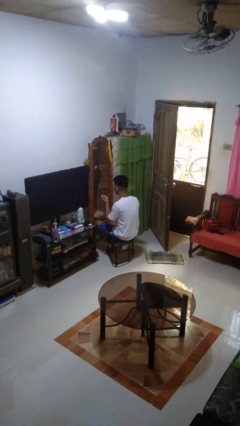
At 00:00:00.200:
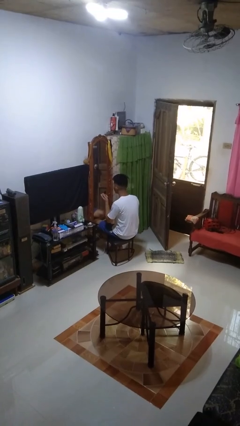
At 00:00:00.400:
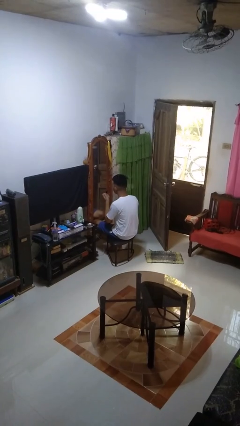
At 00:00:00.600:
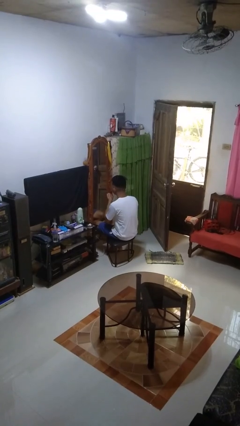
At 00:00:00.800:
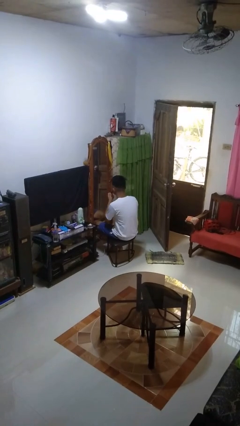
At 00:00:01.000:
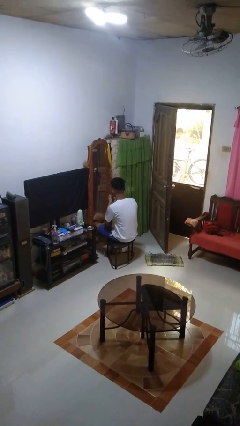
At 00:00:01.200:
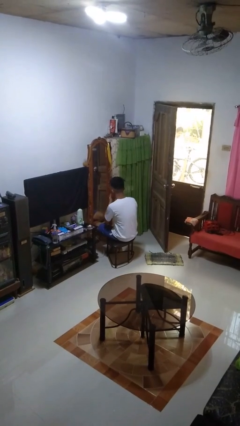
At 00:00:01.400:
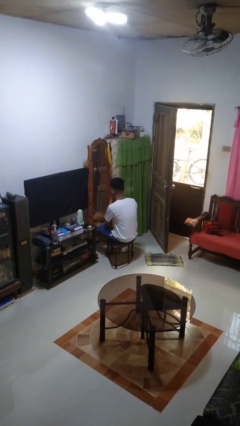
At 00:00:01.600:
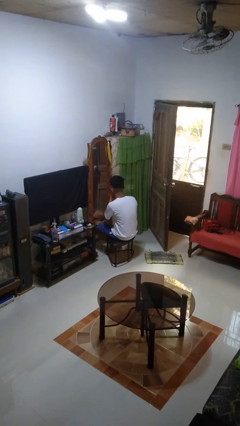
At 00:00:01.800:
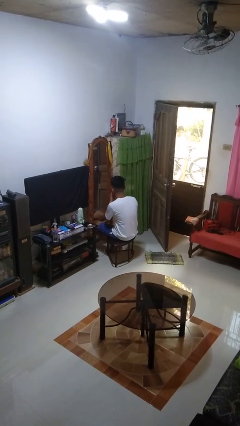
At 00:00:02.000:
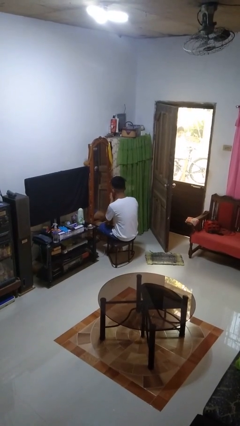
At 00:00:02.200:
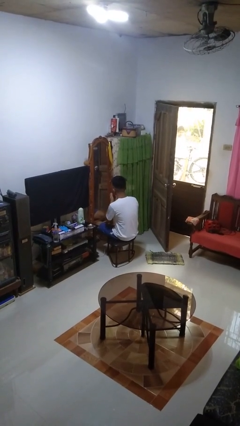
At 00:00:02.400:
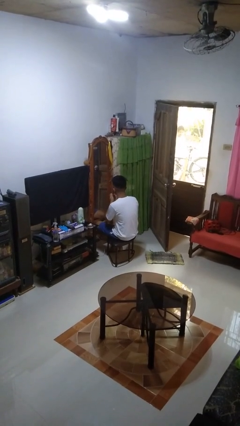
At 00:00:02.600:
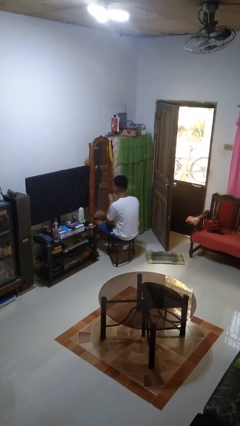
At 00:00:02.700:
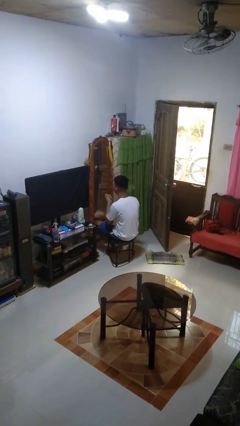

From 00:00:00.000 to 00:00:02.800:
person applies lip makeup

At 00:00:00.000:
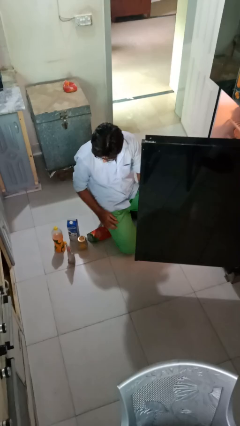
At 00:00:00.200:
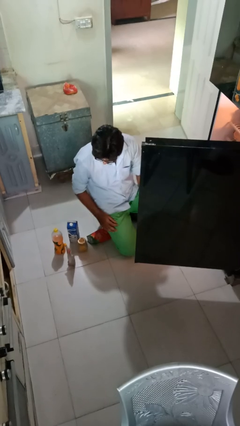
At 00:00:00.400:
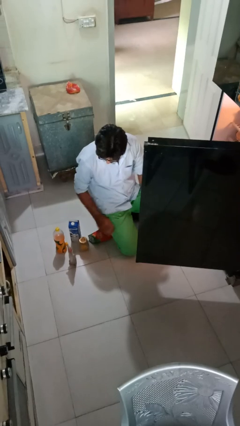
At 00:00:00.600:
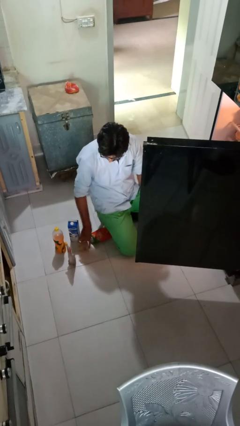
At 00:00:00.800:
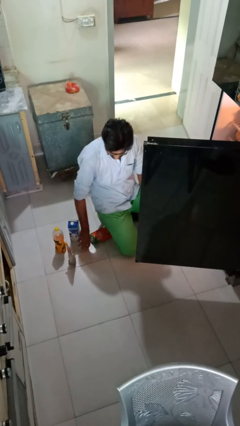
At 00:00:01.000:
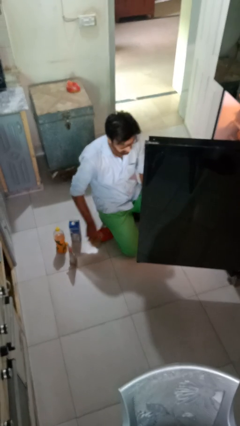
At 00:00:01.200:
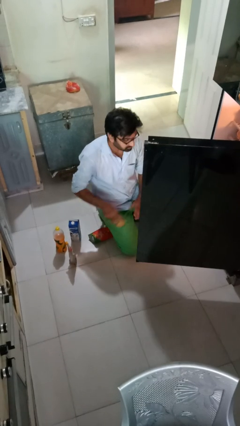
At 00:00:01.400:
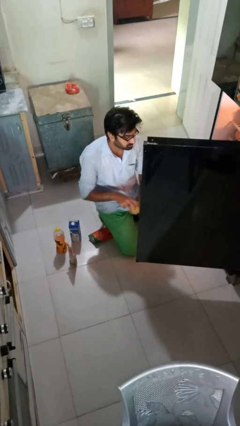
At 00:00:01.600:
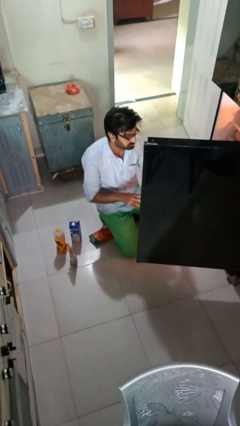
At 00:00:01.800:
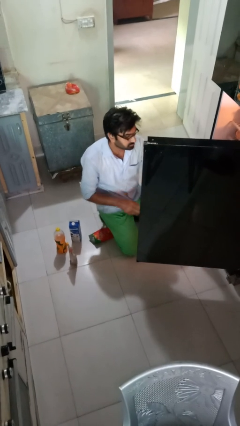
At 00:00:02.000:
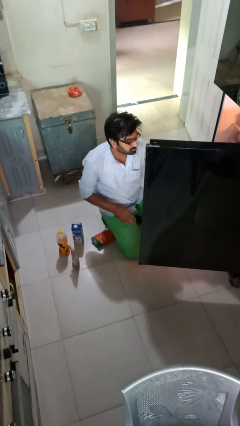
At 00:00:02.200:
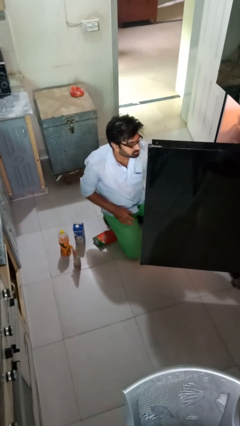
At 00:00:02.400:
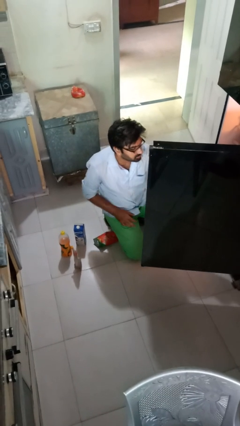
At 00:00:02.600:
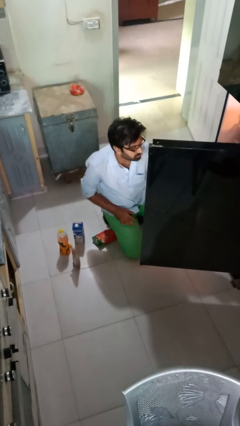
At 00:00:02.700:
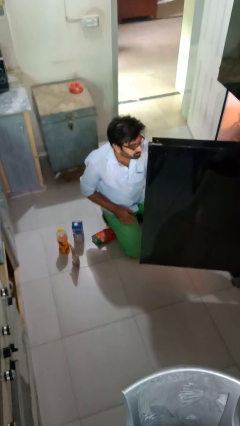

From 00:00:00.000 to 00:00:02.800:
person loads groceries into refrigerator

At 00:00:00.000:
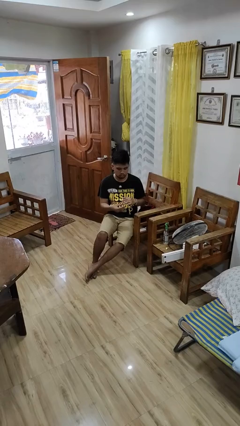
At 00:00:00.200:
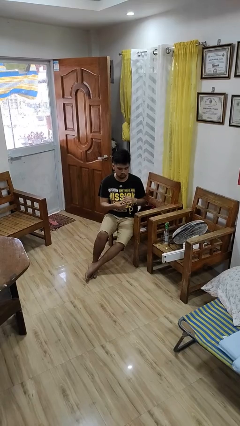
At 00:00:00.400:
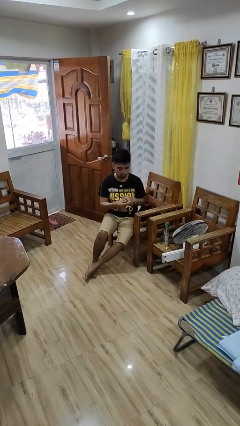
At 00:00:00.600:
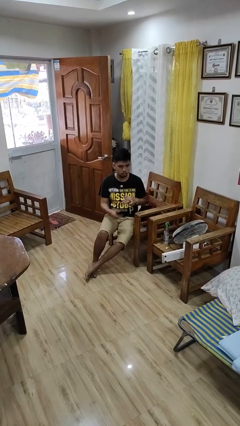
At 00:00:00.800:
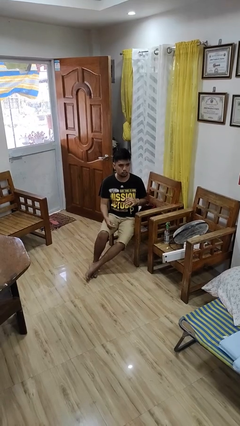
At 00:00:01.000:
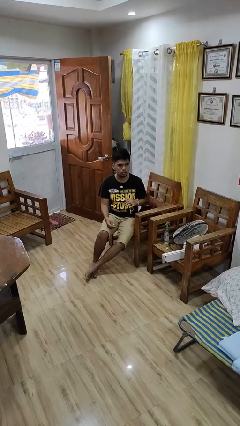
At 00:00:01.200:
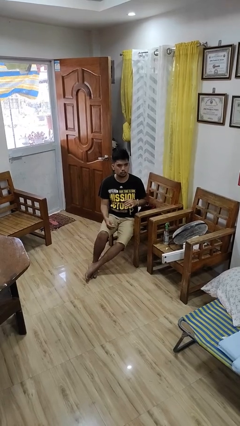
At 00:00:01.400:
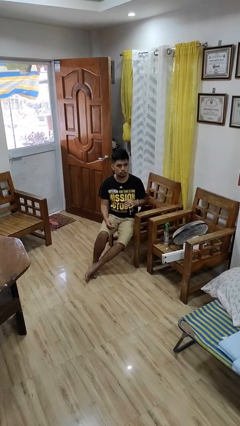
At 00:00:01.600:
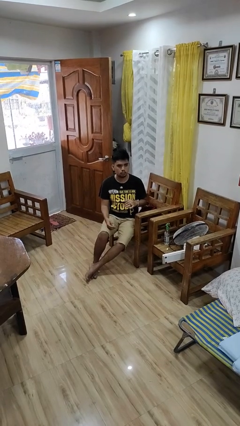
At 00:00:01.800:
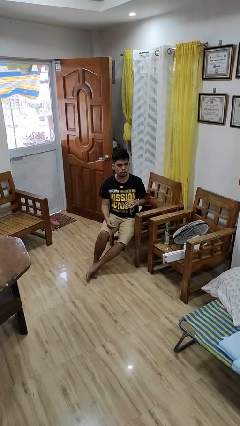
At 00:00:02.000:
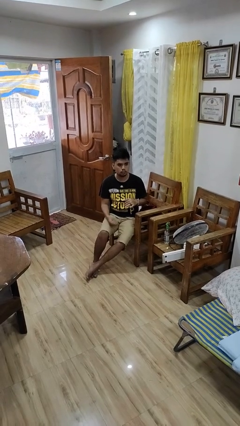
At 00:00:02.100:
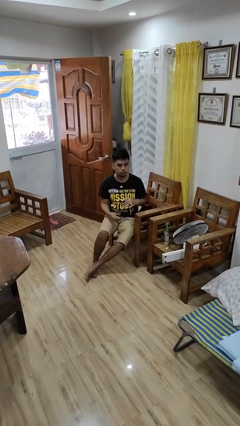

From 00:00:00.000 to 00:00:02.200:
person puts on ring

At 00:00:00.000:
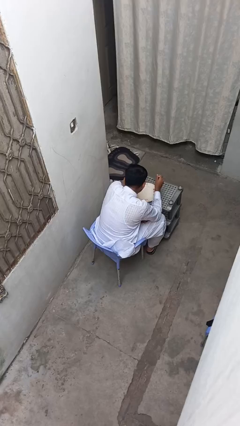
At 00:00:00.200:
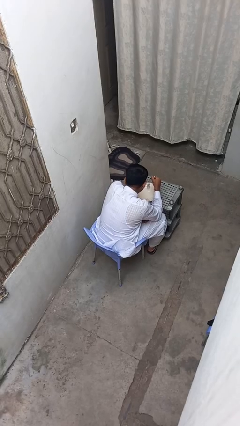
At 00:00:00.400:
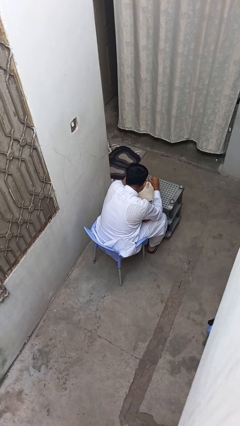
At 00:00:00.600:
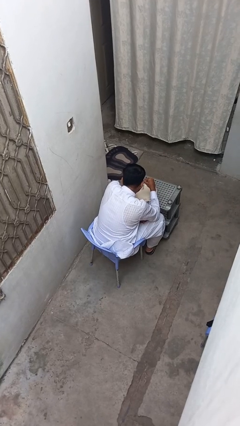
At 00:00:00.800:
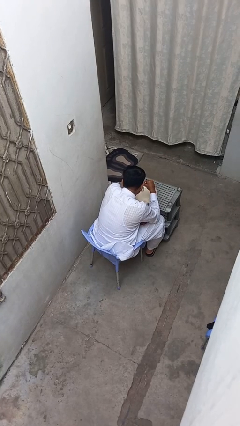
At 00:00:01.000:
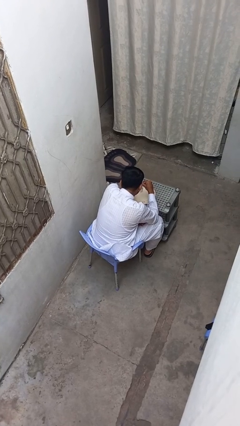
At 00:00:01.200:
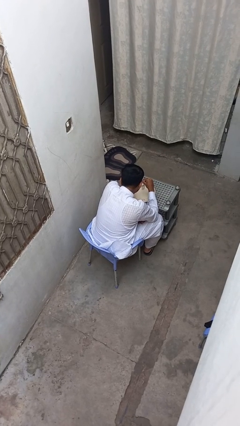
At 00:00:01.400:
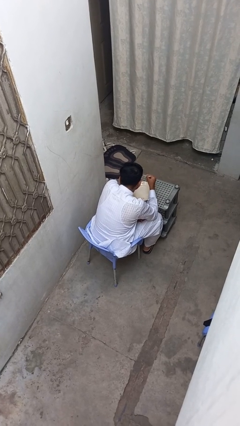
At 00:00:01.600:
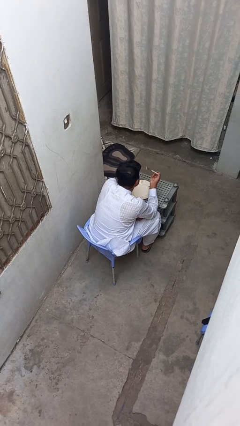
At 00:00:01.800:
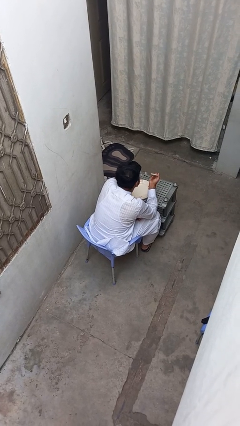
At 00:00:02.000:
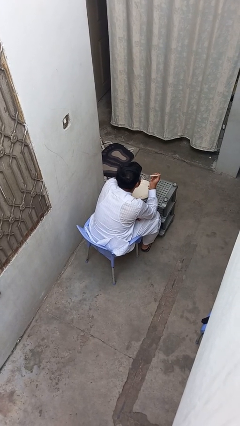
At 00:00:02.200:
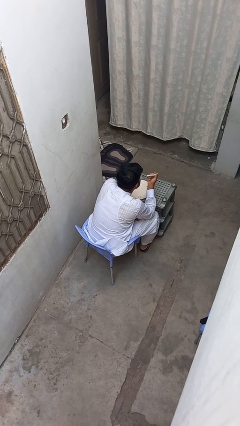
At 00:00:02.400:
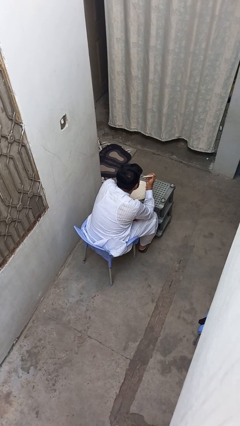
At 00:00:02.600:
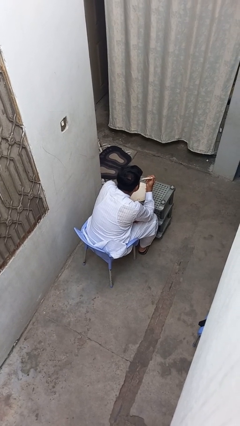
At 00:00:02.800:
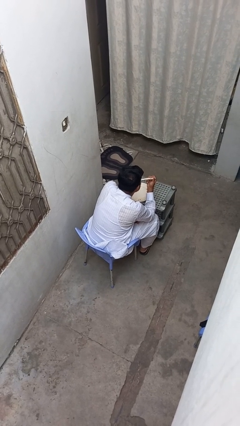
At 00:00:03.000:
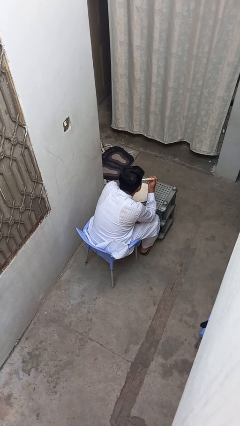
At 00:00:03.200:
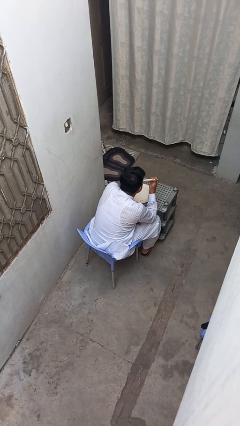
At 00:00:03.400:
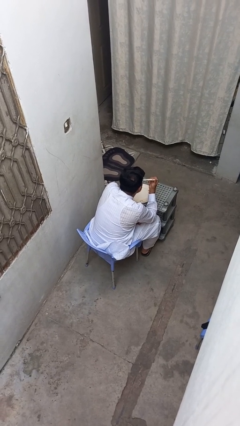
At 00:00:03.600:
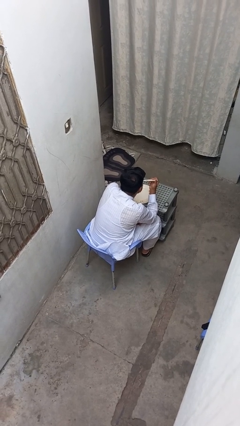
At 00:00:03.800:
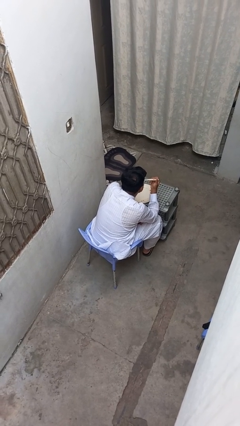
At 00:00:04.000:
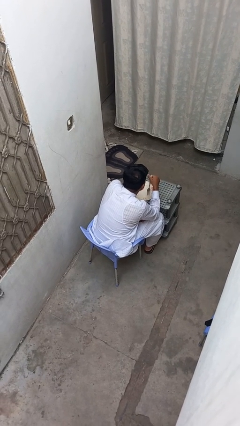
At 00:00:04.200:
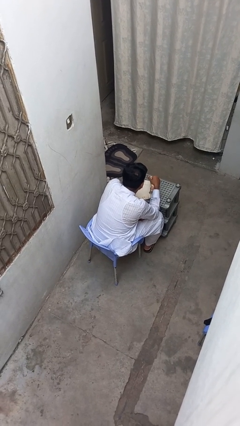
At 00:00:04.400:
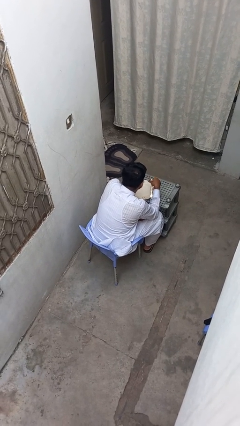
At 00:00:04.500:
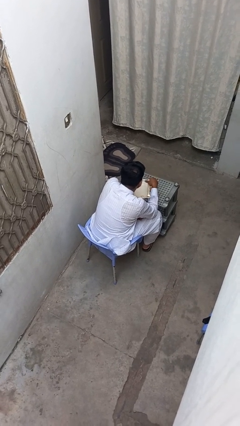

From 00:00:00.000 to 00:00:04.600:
person eats with utensil

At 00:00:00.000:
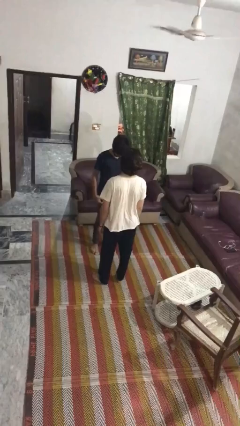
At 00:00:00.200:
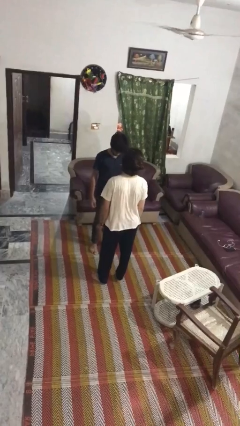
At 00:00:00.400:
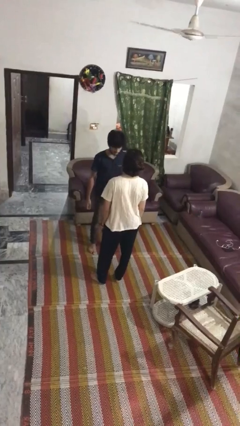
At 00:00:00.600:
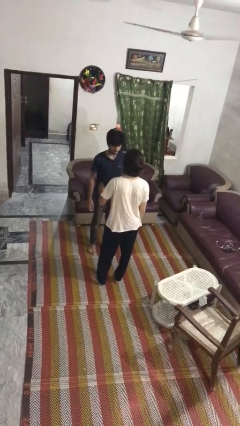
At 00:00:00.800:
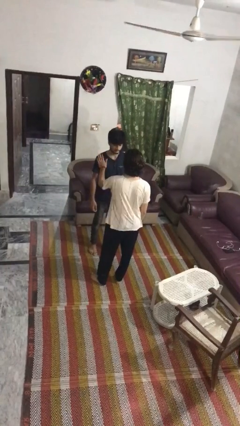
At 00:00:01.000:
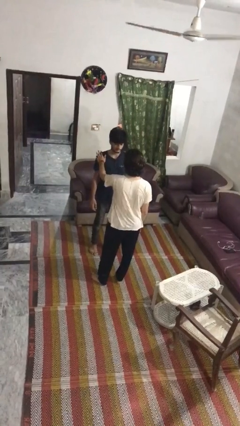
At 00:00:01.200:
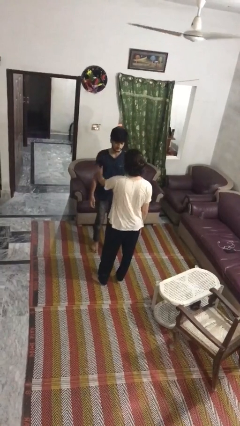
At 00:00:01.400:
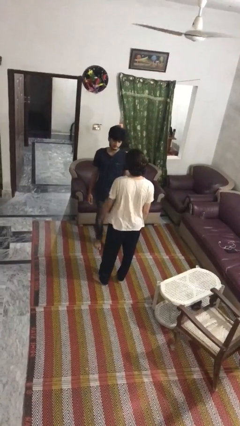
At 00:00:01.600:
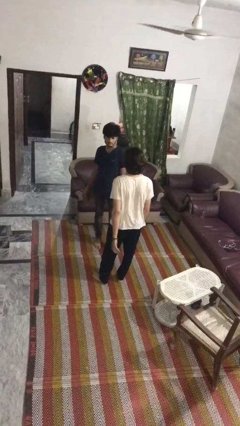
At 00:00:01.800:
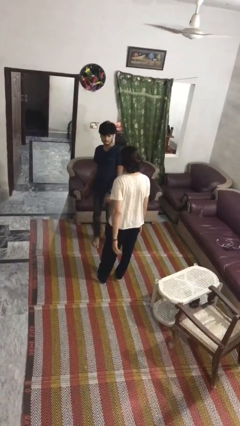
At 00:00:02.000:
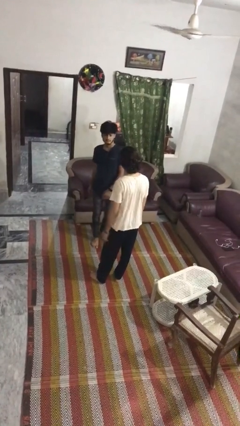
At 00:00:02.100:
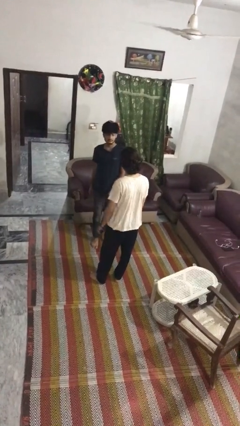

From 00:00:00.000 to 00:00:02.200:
person shoves person

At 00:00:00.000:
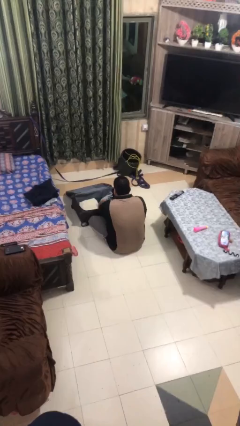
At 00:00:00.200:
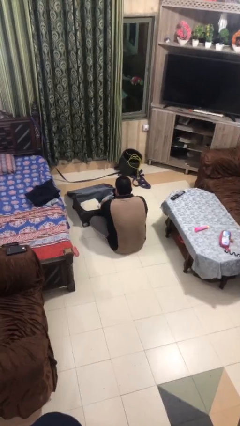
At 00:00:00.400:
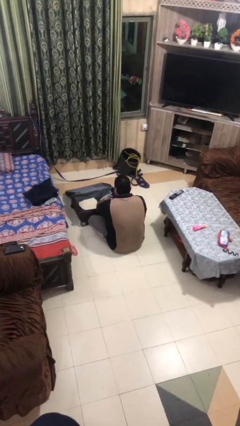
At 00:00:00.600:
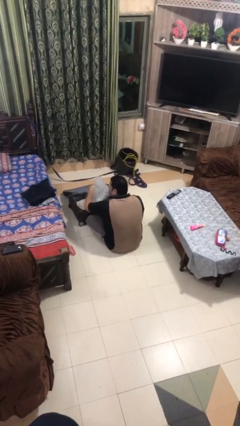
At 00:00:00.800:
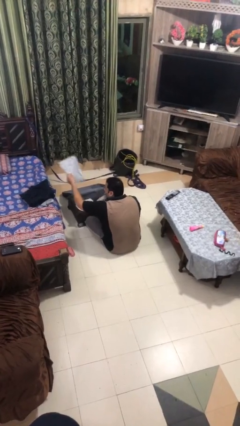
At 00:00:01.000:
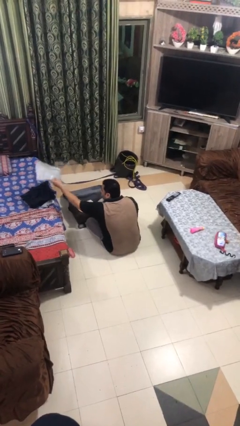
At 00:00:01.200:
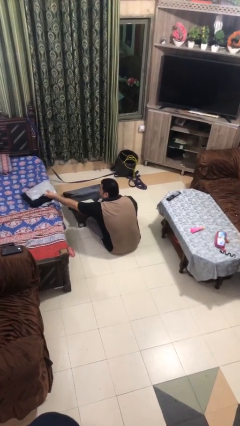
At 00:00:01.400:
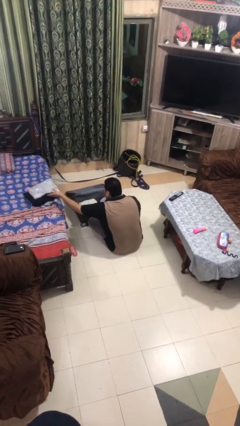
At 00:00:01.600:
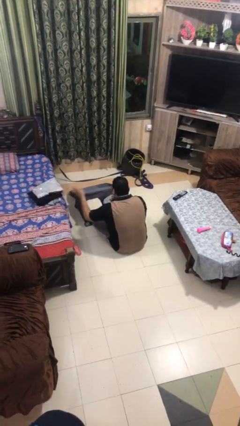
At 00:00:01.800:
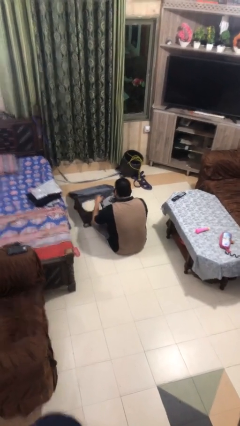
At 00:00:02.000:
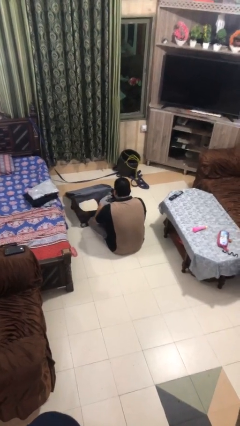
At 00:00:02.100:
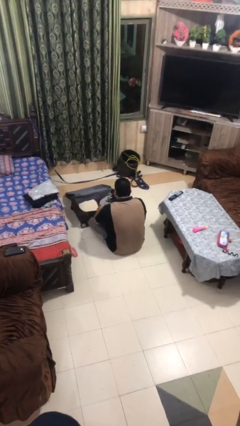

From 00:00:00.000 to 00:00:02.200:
person unloads clothes from suitcase

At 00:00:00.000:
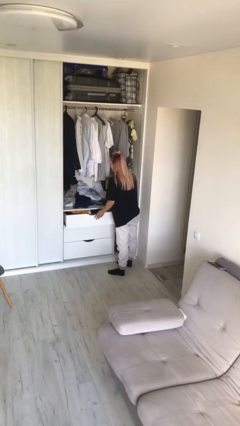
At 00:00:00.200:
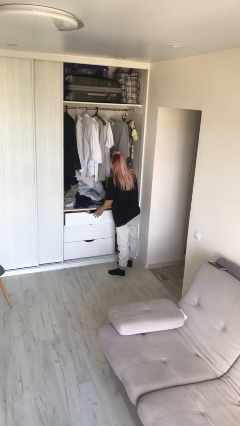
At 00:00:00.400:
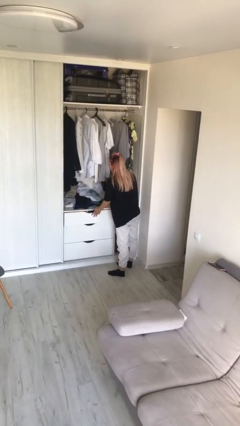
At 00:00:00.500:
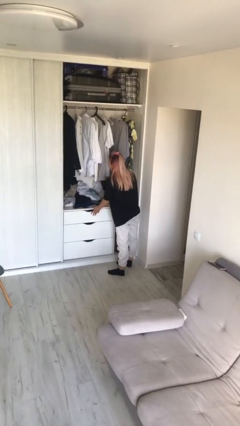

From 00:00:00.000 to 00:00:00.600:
person closes dresser drawer
